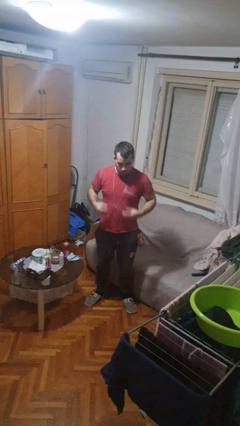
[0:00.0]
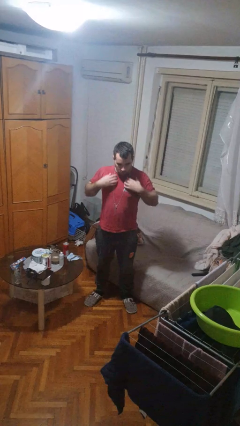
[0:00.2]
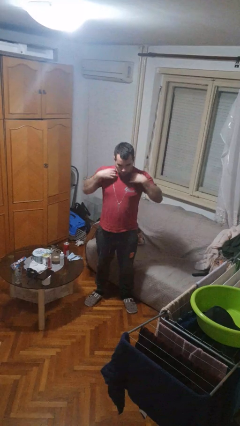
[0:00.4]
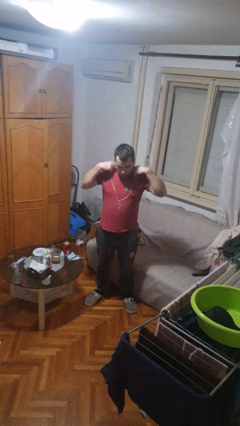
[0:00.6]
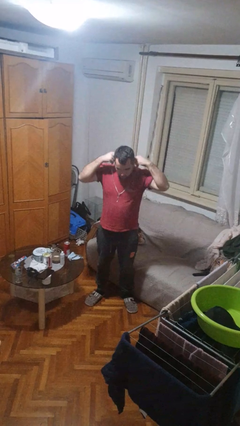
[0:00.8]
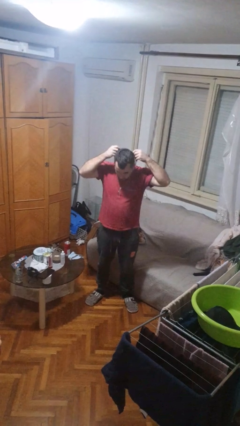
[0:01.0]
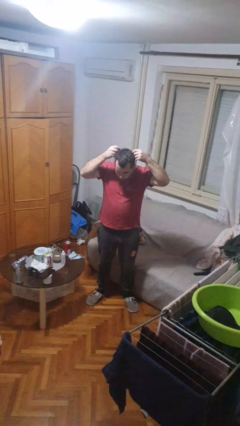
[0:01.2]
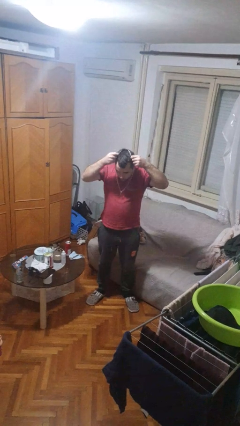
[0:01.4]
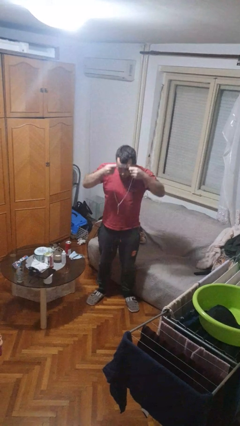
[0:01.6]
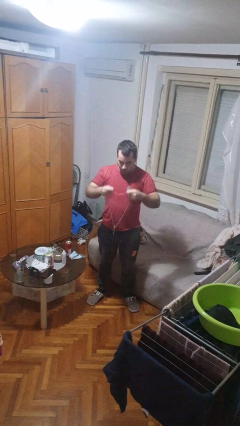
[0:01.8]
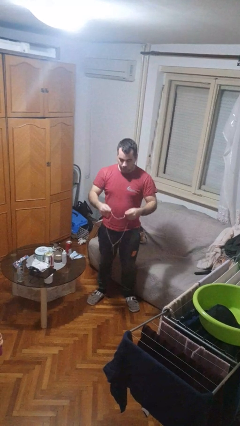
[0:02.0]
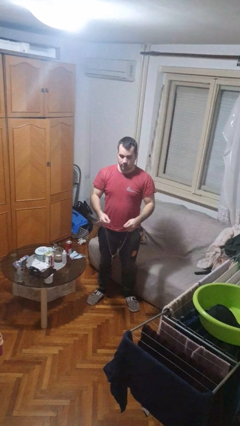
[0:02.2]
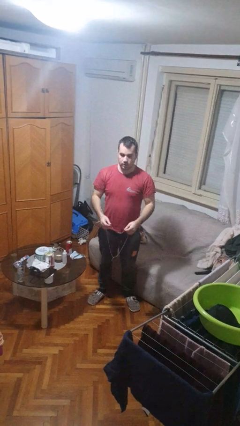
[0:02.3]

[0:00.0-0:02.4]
person takes off necklace

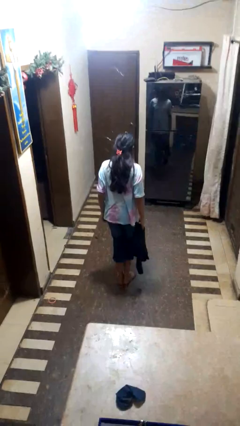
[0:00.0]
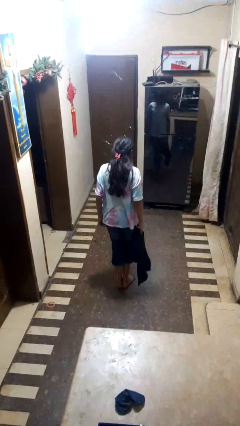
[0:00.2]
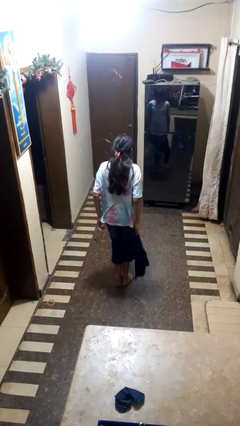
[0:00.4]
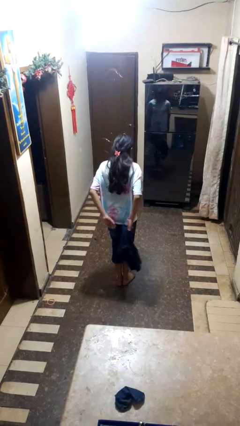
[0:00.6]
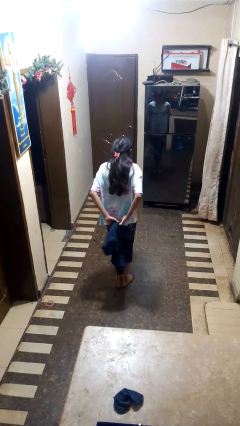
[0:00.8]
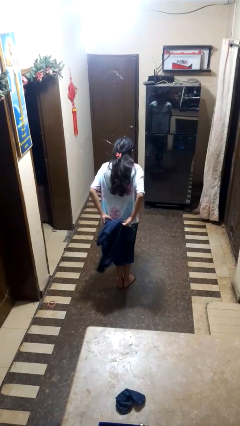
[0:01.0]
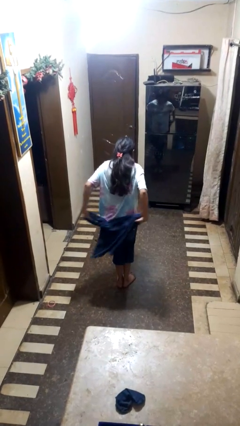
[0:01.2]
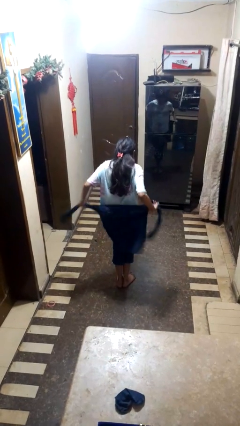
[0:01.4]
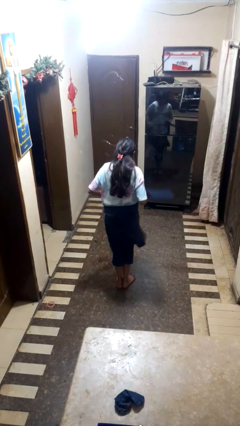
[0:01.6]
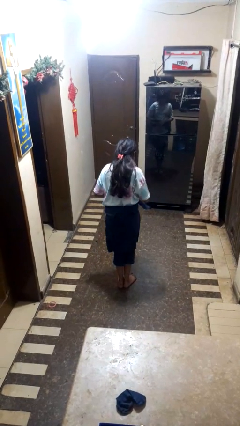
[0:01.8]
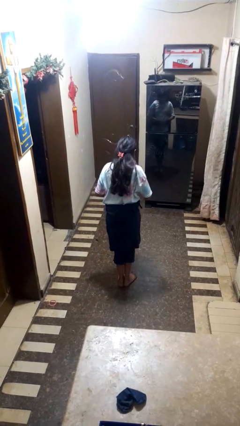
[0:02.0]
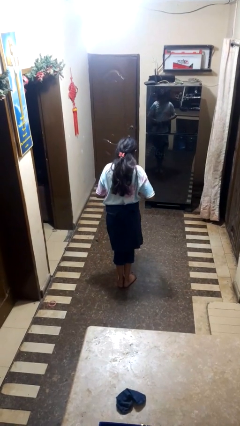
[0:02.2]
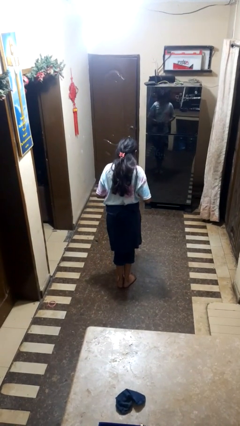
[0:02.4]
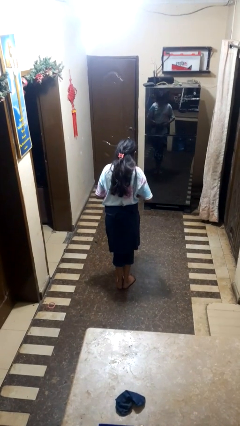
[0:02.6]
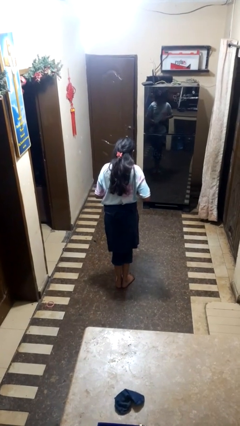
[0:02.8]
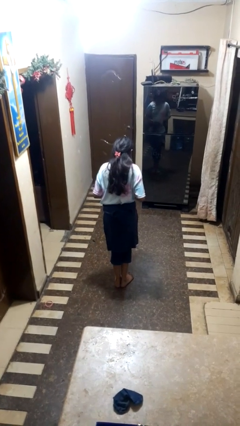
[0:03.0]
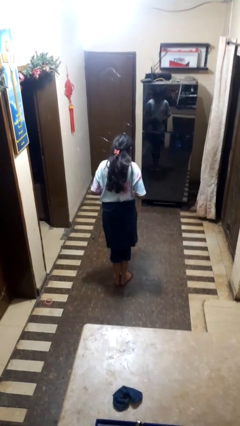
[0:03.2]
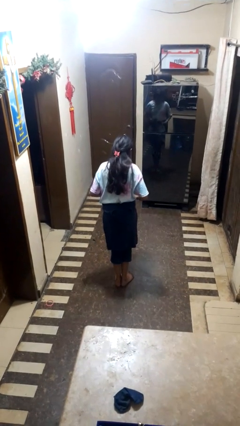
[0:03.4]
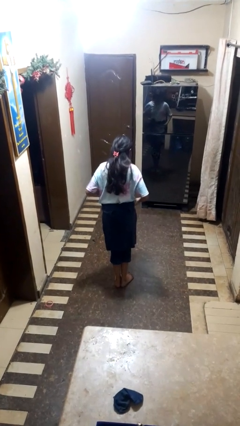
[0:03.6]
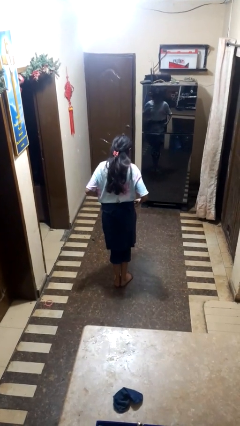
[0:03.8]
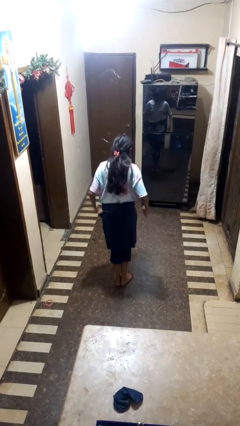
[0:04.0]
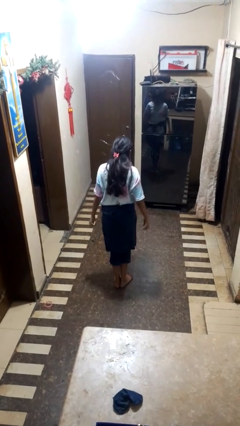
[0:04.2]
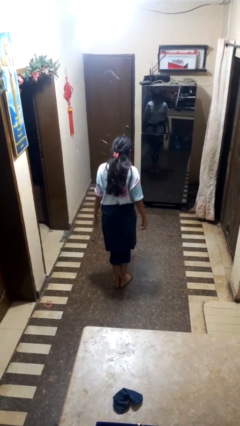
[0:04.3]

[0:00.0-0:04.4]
person ties jacket around waist

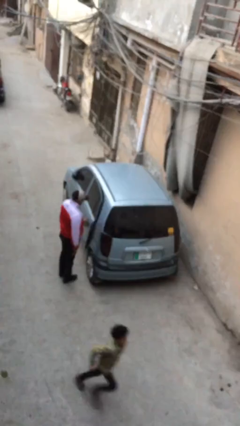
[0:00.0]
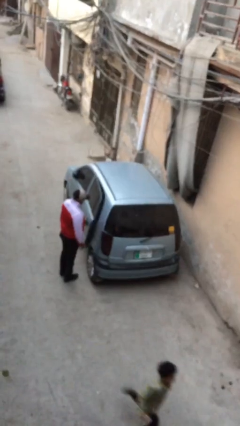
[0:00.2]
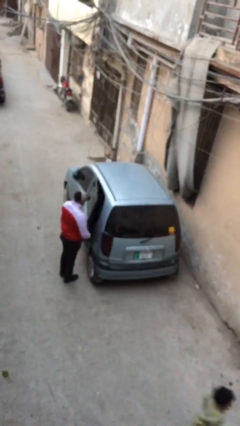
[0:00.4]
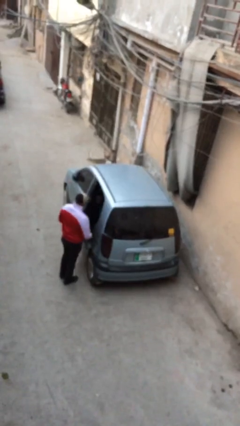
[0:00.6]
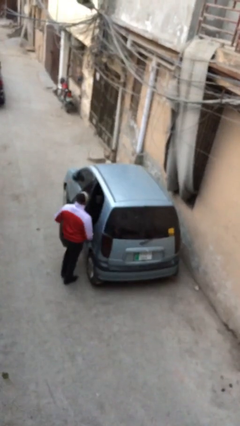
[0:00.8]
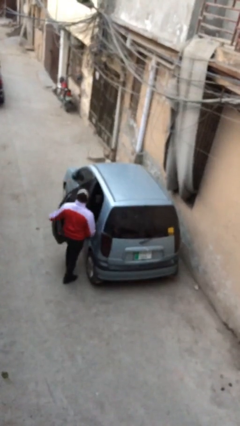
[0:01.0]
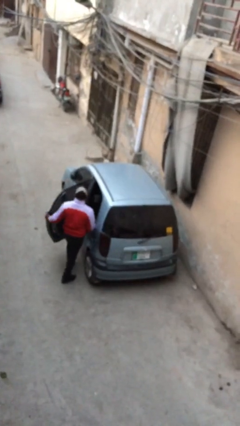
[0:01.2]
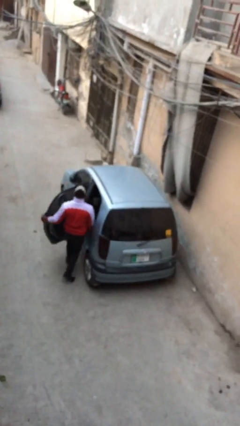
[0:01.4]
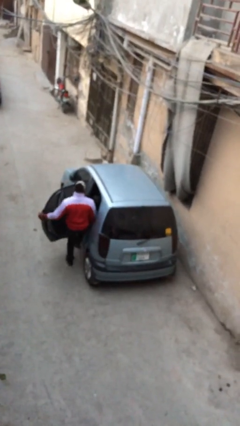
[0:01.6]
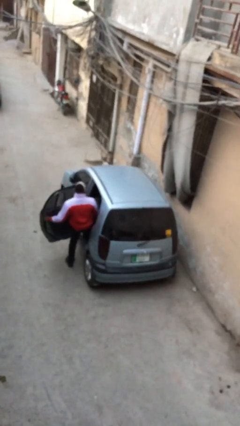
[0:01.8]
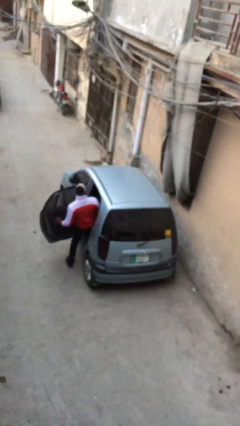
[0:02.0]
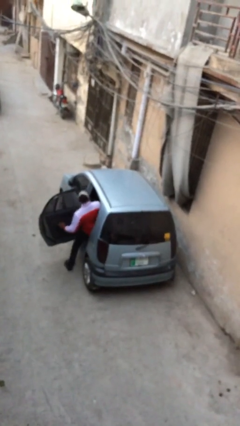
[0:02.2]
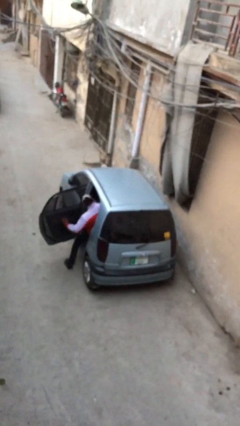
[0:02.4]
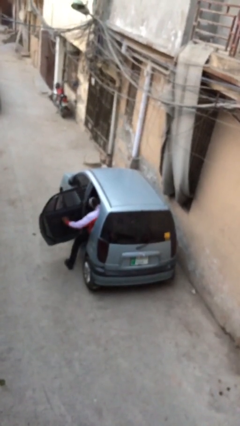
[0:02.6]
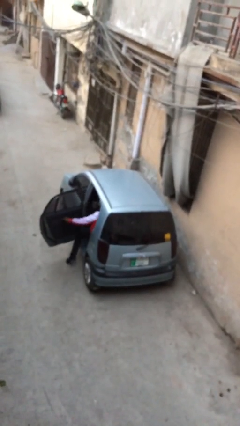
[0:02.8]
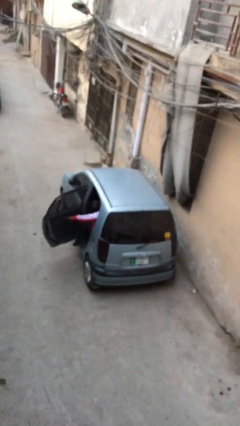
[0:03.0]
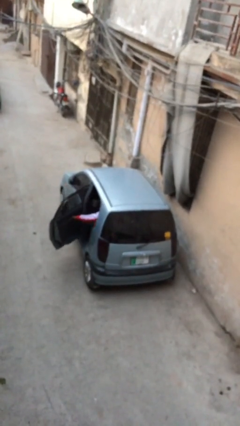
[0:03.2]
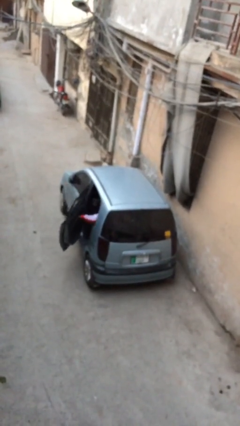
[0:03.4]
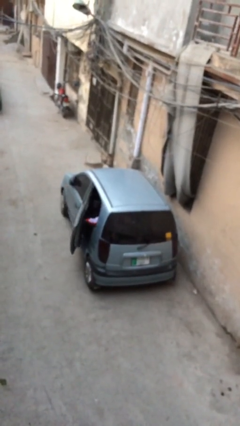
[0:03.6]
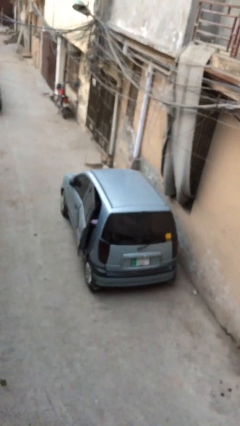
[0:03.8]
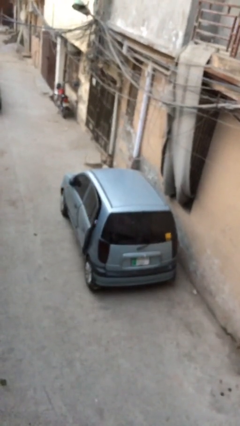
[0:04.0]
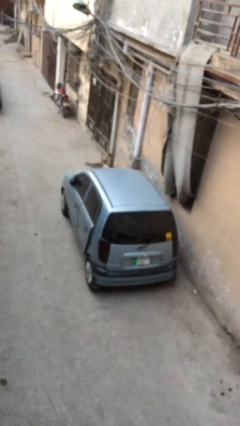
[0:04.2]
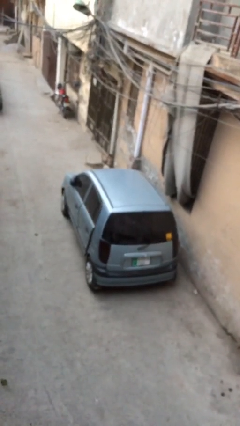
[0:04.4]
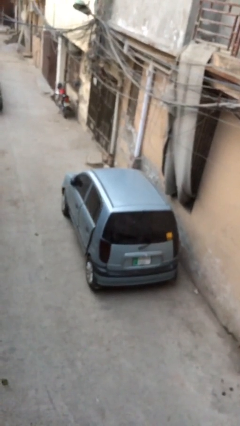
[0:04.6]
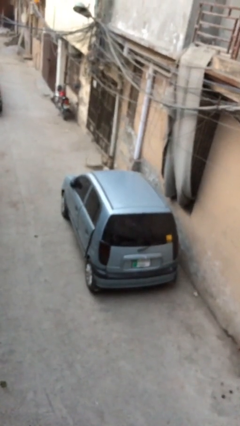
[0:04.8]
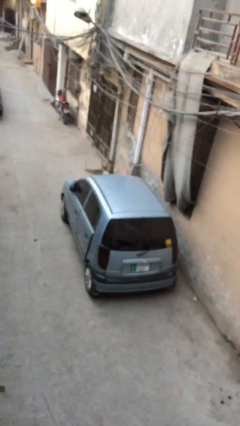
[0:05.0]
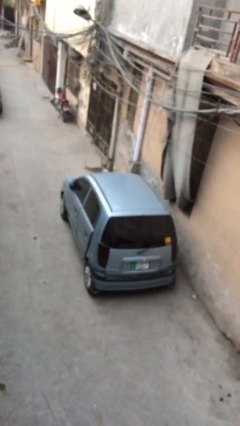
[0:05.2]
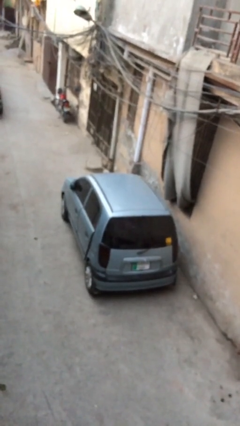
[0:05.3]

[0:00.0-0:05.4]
car picks up person

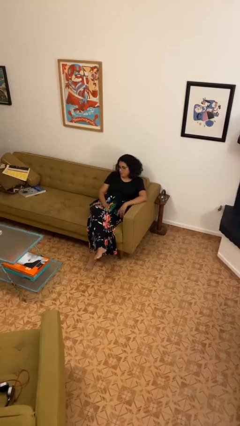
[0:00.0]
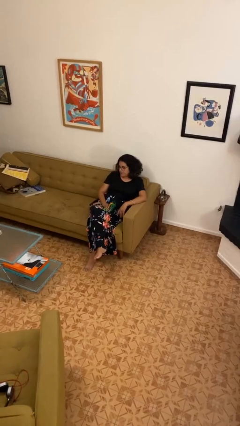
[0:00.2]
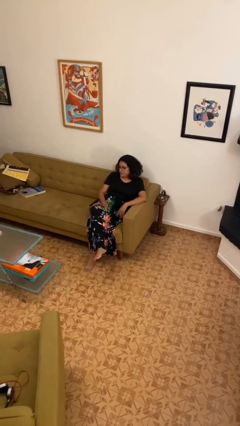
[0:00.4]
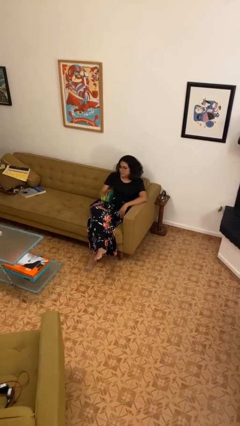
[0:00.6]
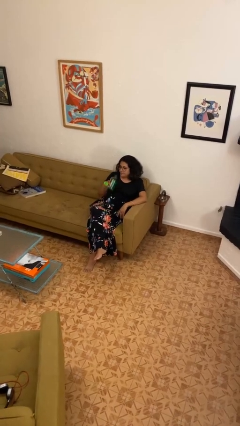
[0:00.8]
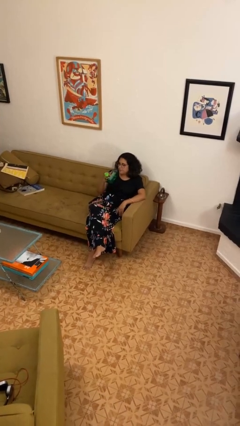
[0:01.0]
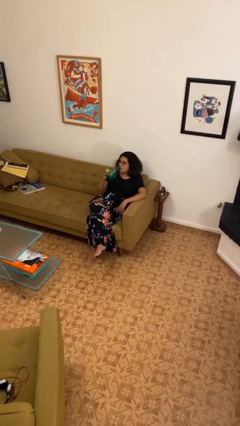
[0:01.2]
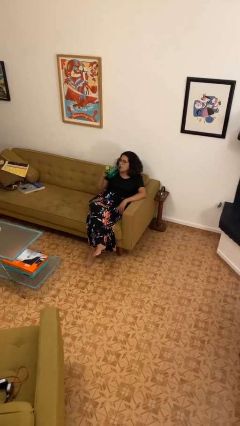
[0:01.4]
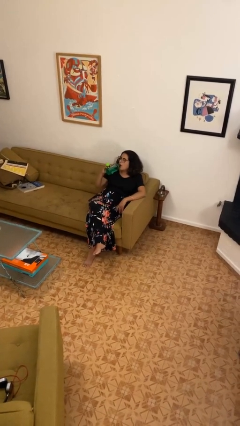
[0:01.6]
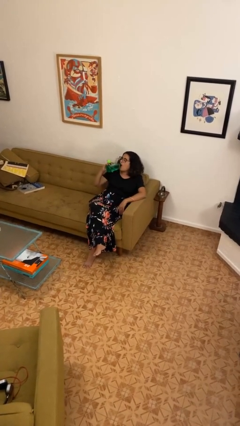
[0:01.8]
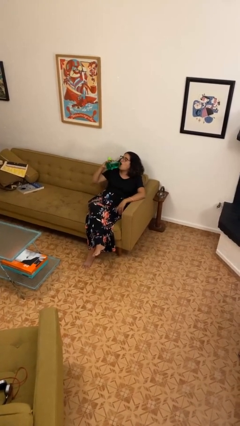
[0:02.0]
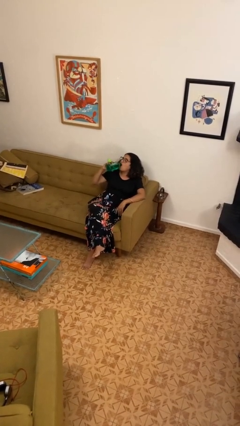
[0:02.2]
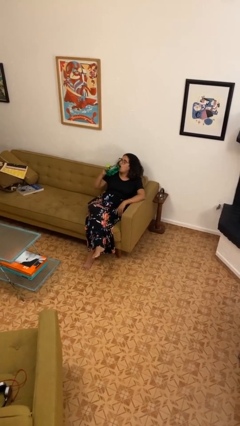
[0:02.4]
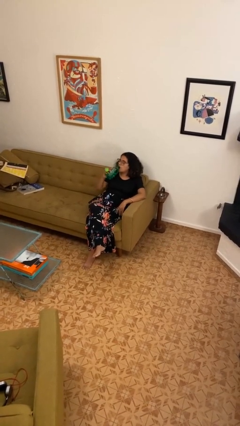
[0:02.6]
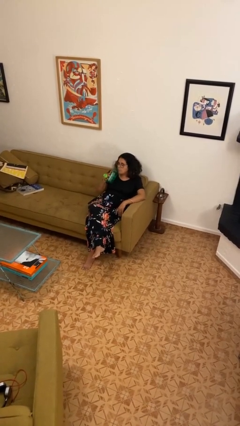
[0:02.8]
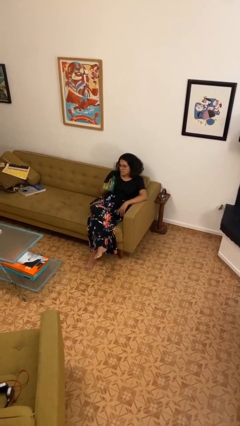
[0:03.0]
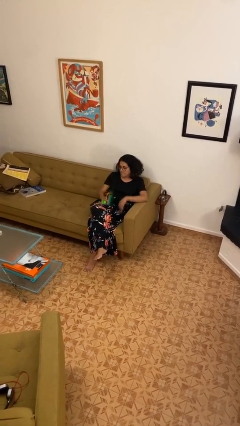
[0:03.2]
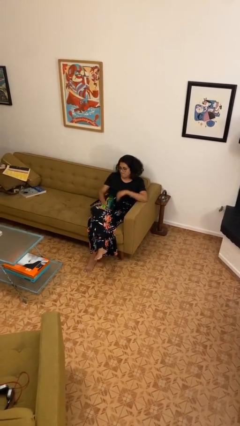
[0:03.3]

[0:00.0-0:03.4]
person drinks from bottle

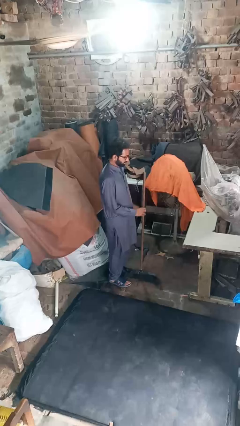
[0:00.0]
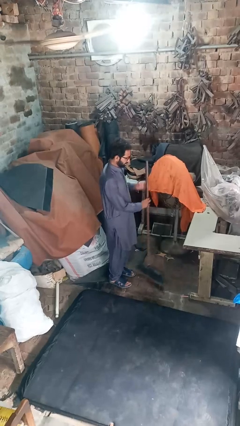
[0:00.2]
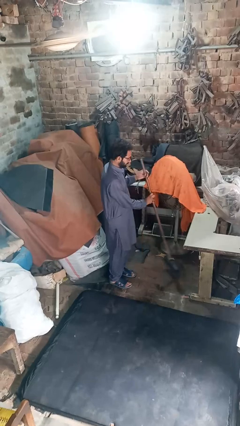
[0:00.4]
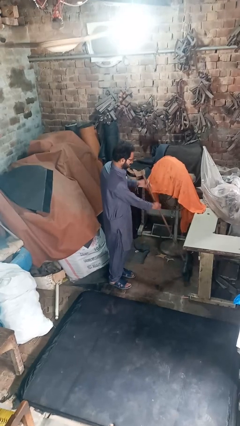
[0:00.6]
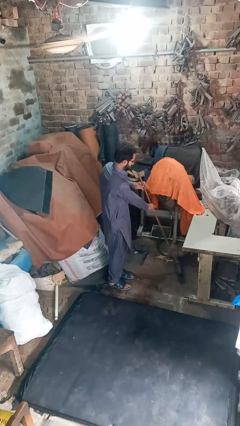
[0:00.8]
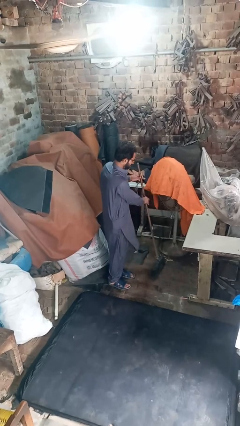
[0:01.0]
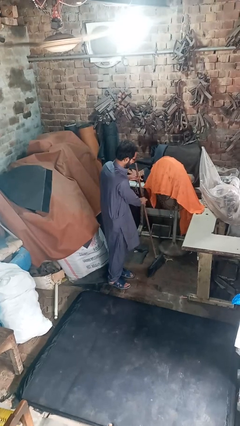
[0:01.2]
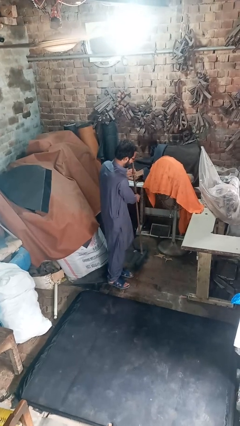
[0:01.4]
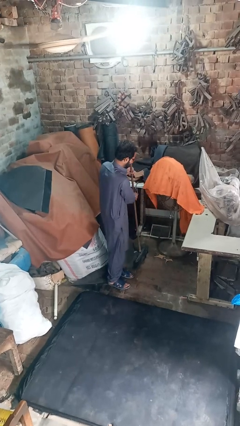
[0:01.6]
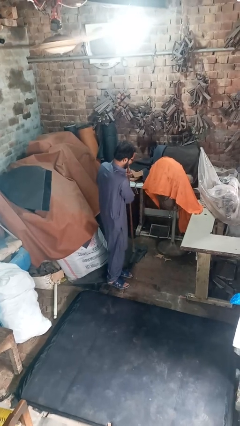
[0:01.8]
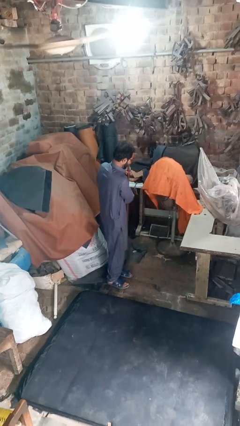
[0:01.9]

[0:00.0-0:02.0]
person sweeps floor

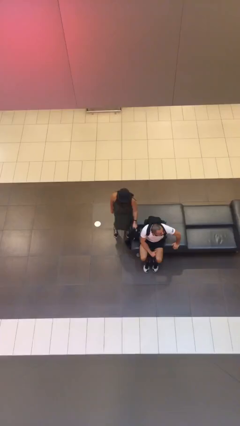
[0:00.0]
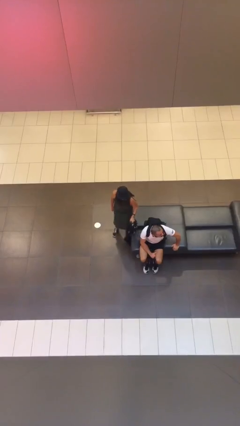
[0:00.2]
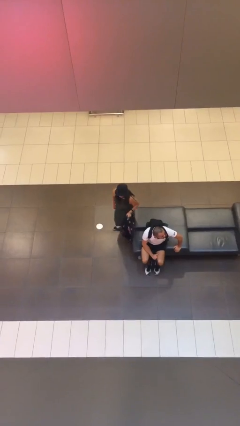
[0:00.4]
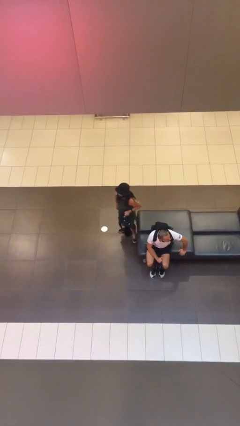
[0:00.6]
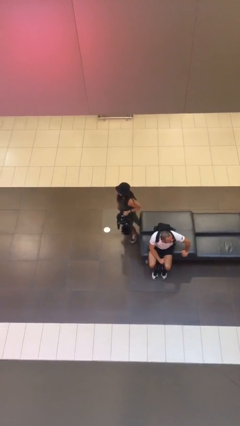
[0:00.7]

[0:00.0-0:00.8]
person steals object from person
